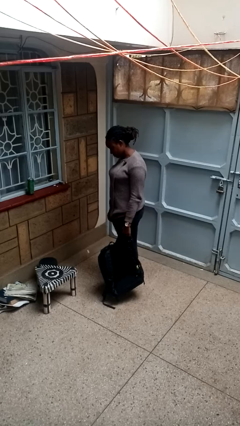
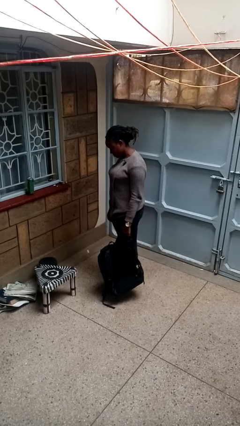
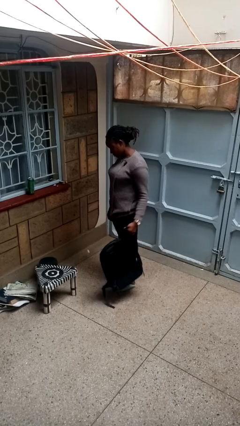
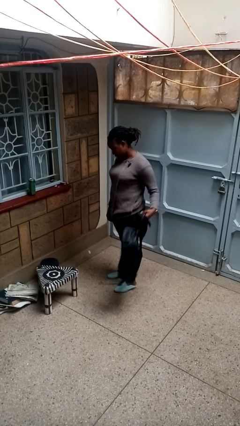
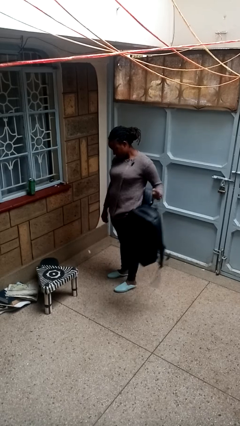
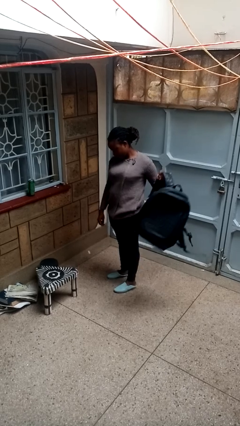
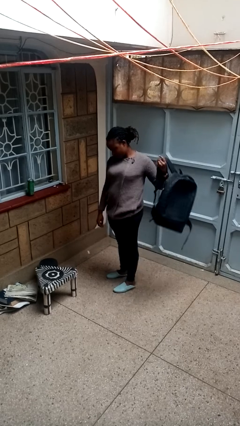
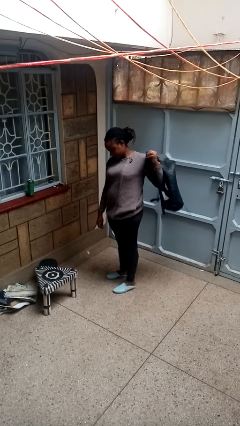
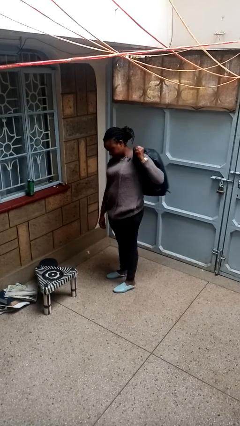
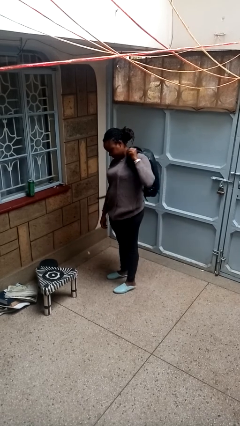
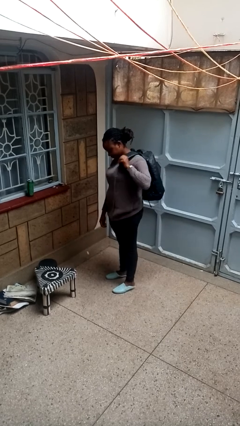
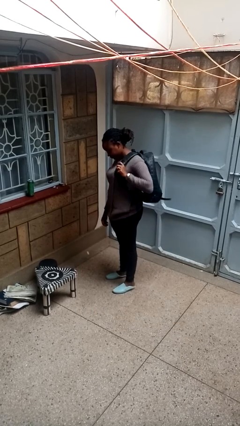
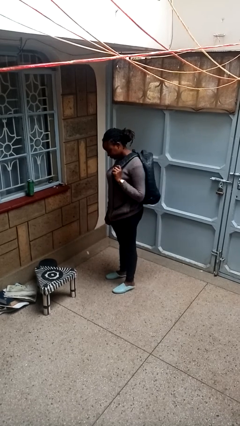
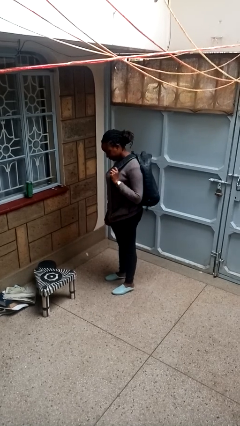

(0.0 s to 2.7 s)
person puts on backpack

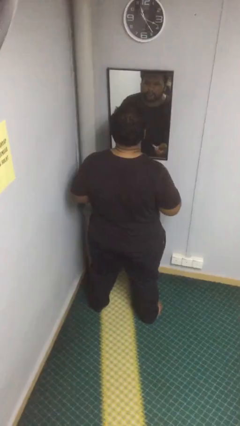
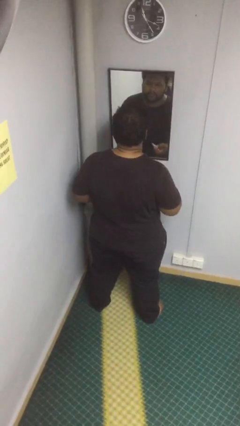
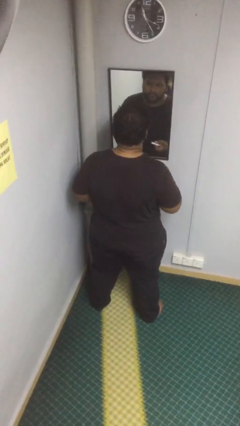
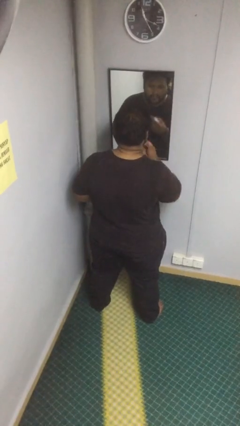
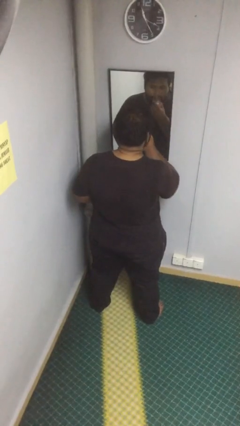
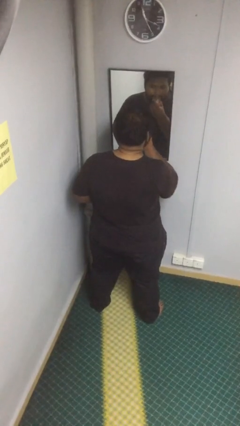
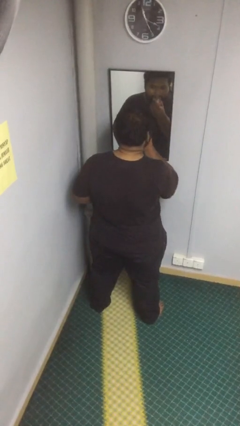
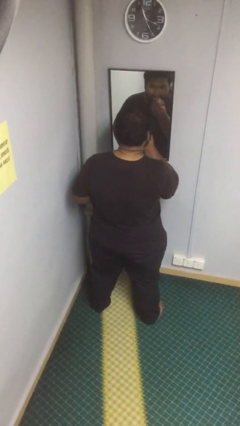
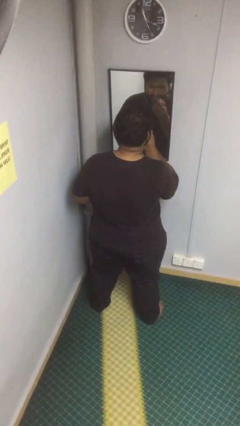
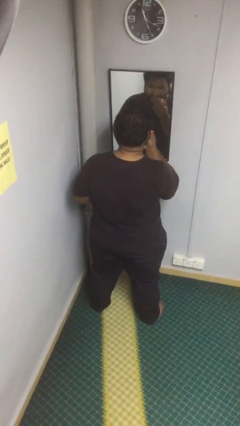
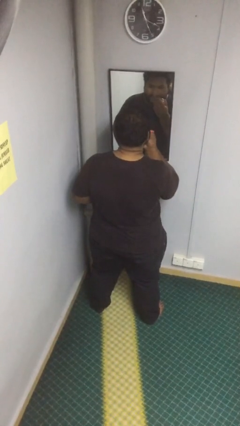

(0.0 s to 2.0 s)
person applies lip makeup

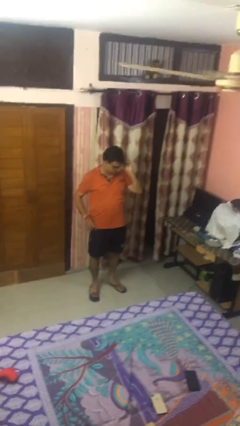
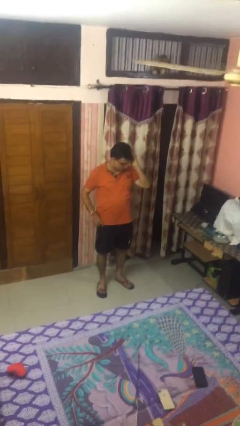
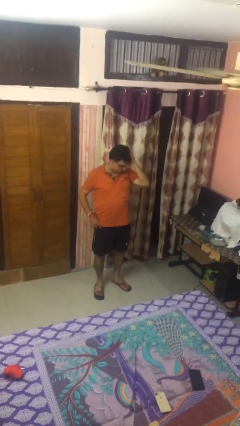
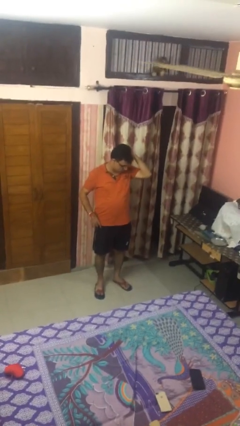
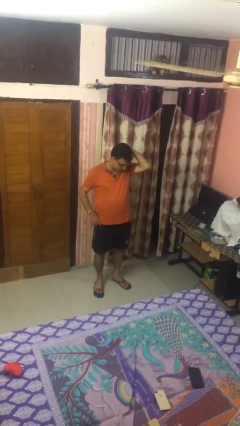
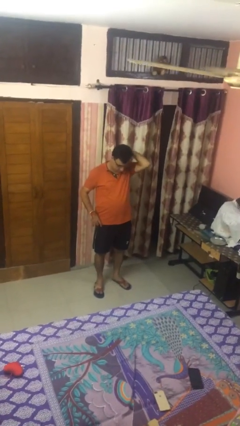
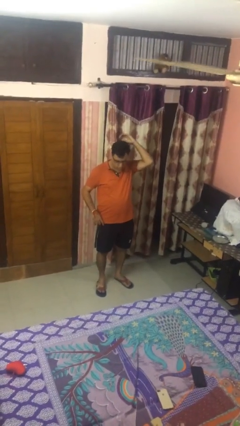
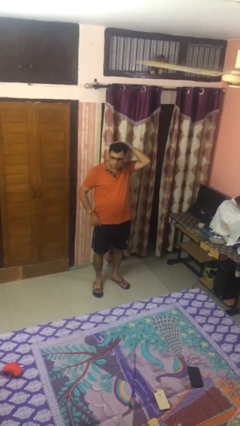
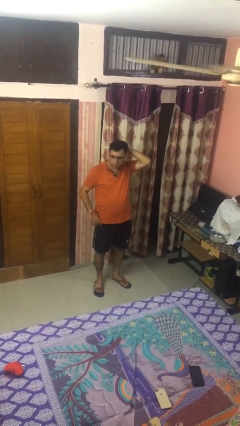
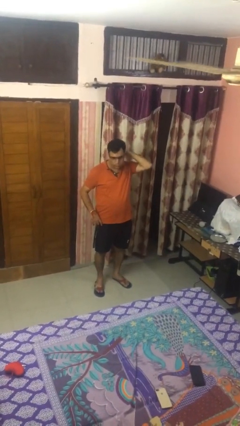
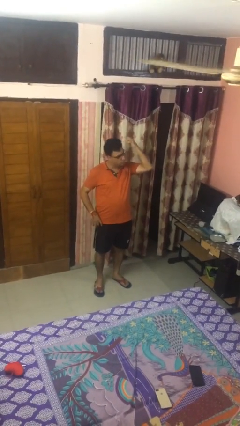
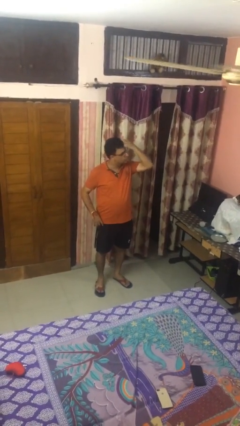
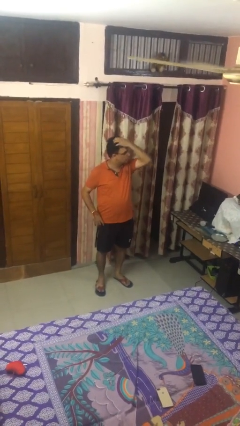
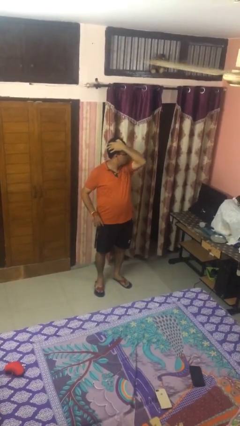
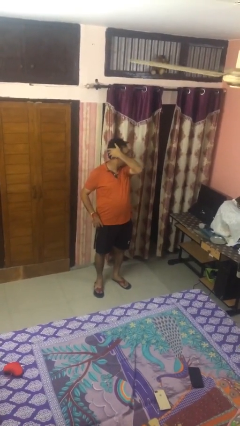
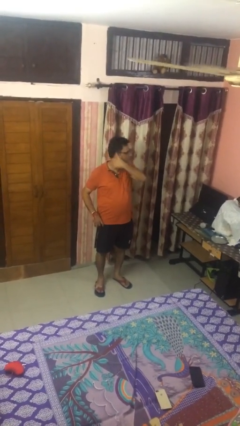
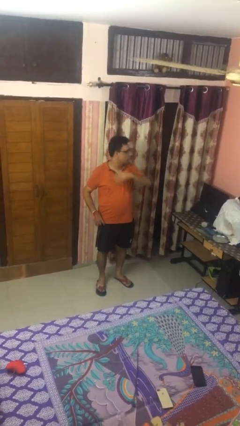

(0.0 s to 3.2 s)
person strokes hair

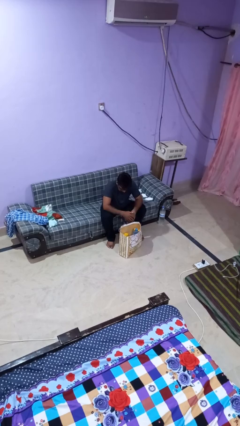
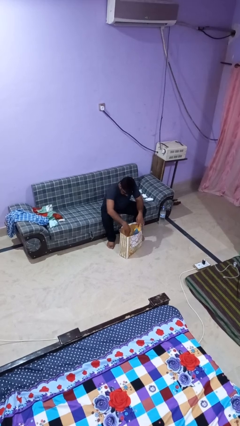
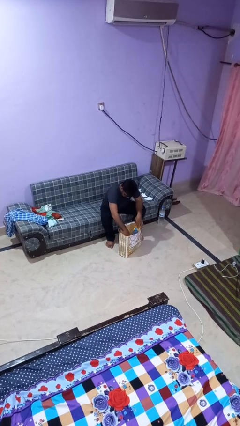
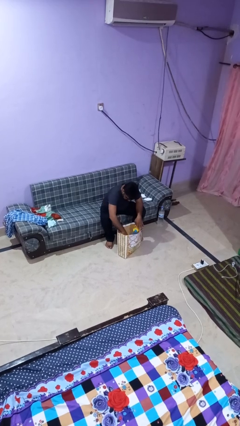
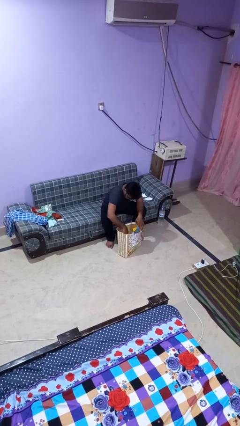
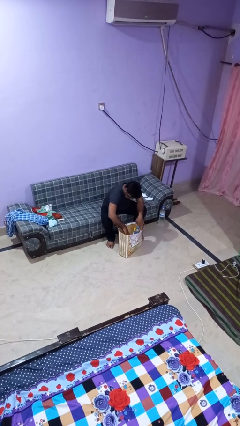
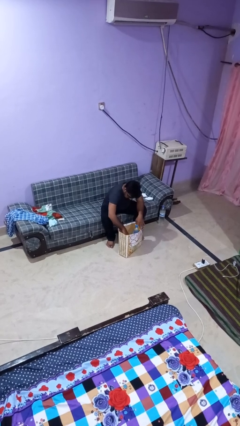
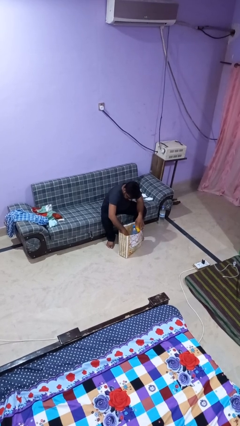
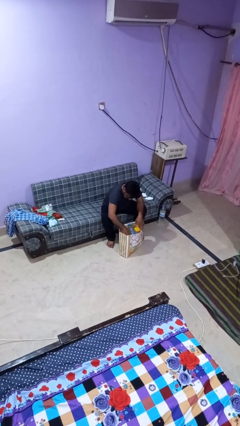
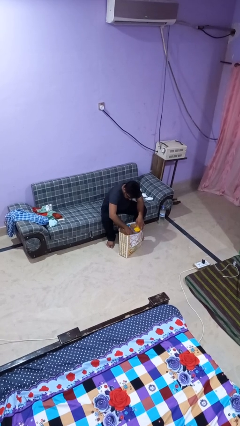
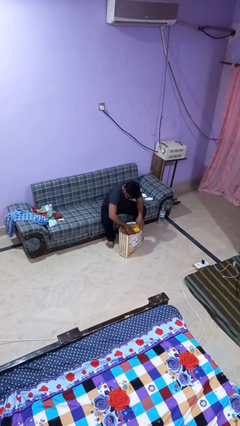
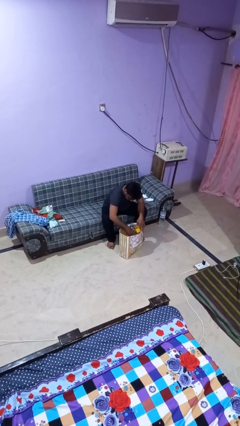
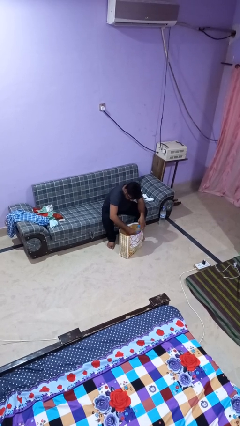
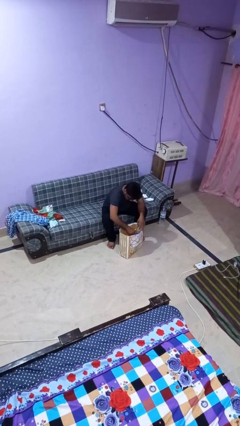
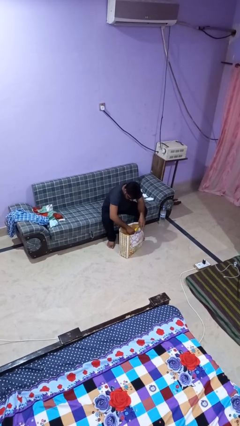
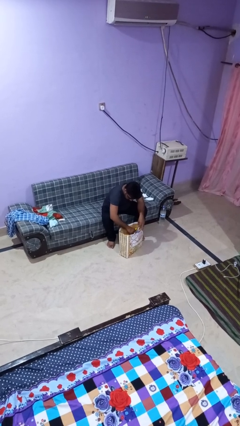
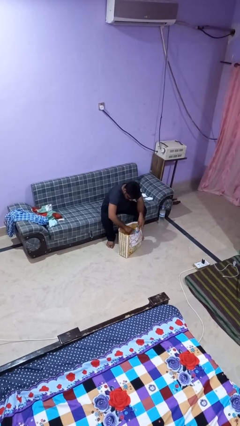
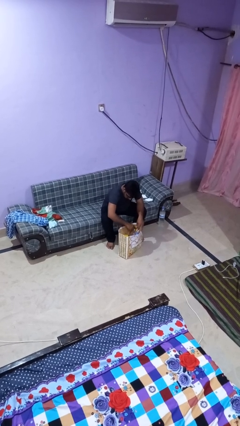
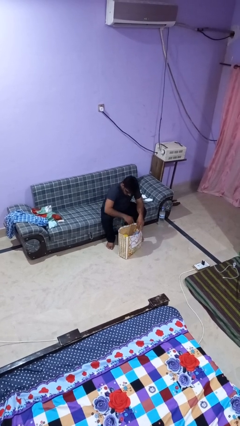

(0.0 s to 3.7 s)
person searches in bag

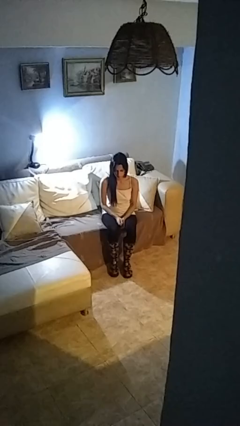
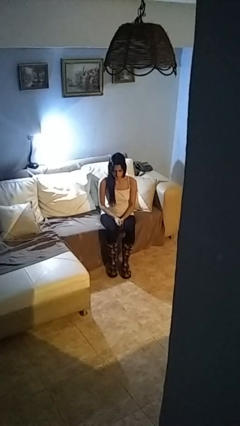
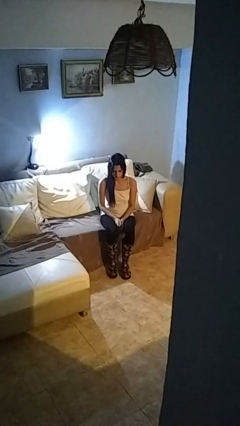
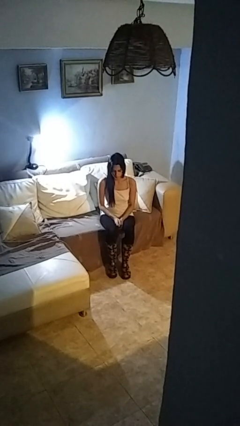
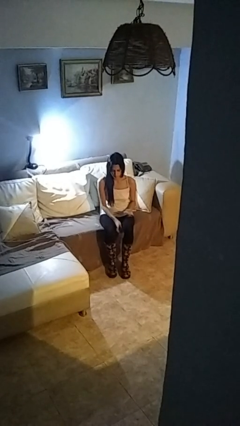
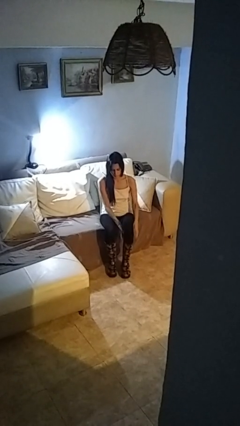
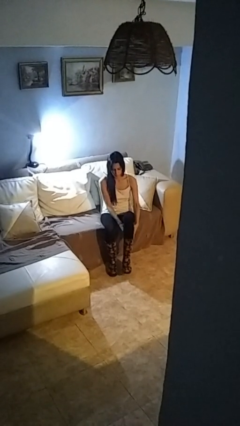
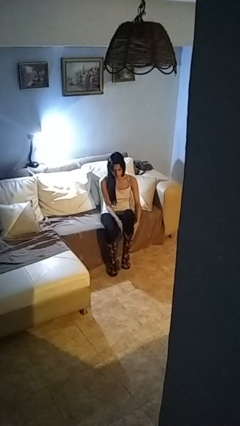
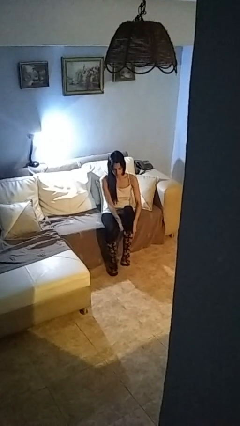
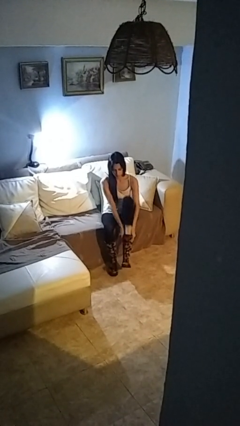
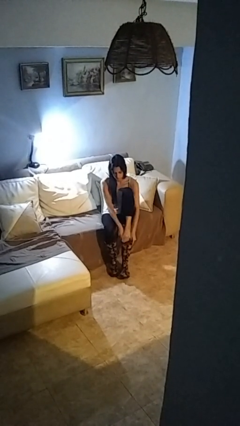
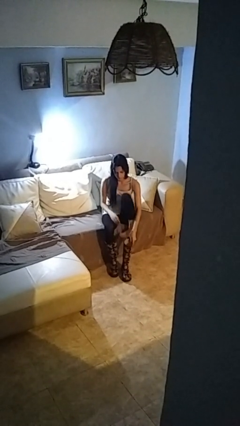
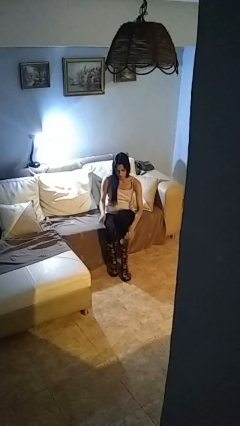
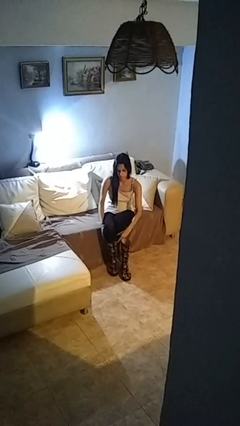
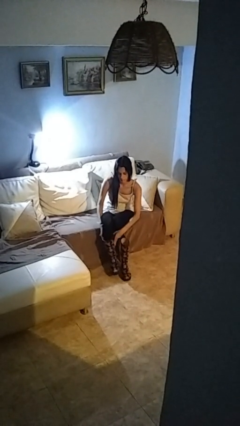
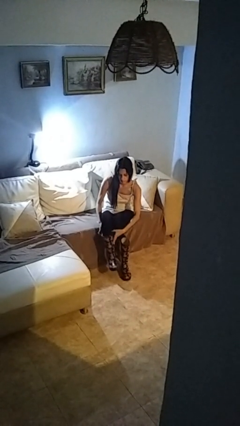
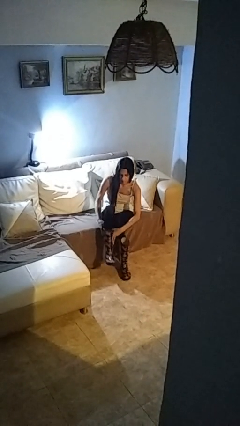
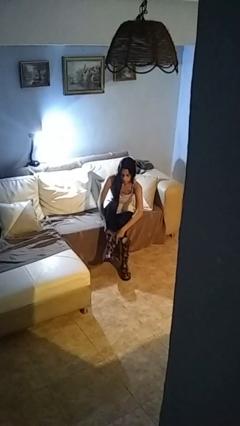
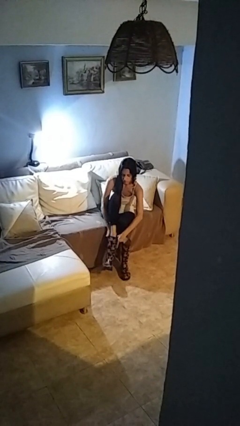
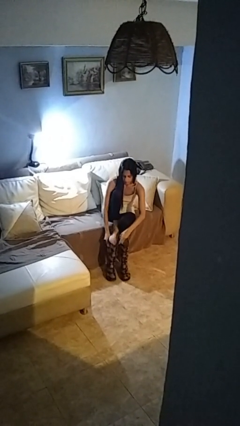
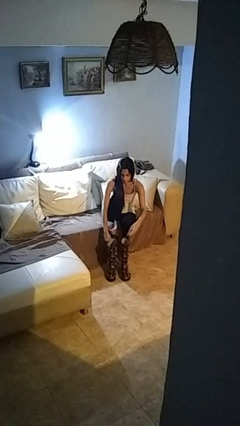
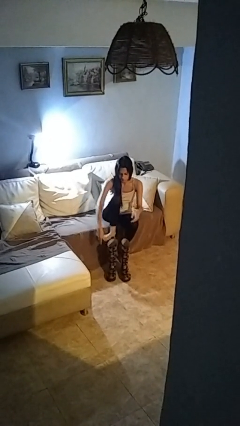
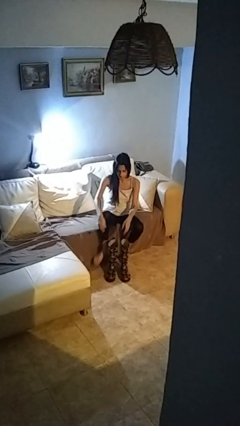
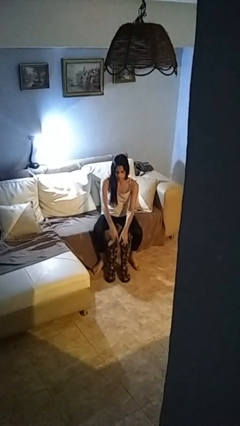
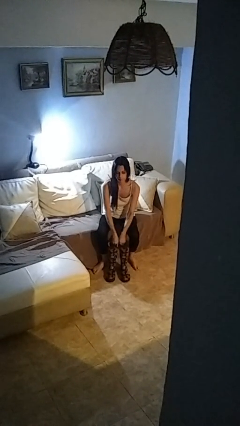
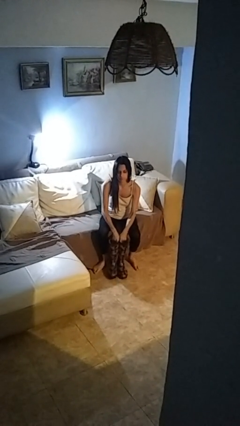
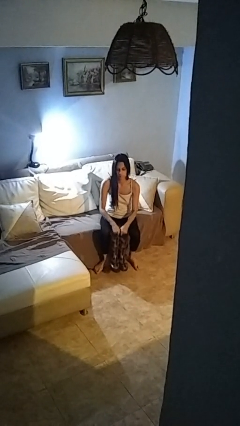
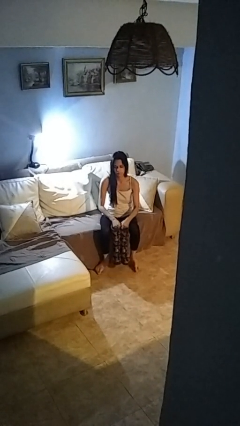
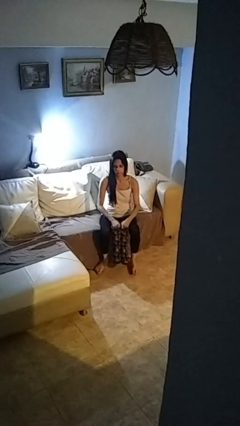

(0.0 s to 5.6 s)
person takes off boots

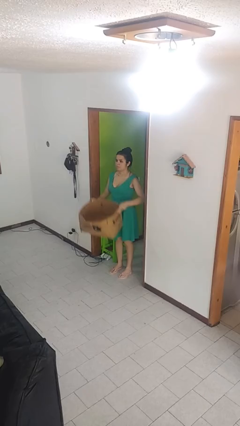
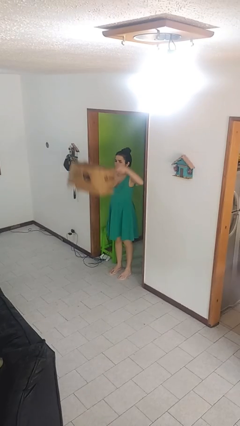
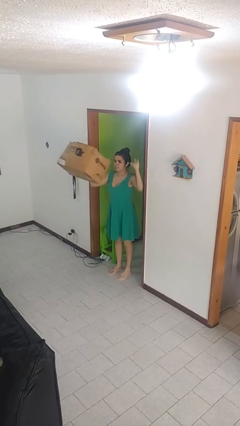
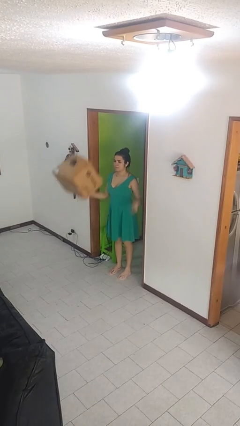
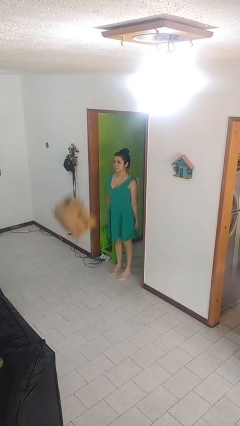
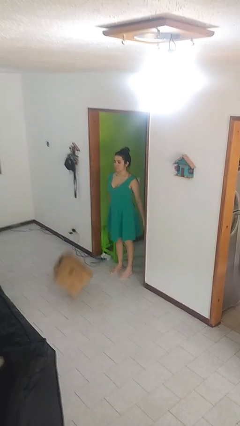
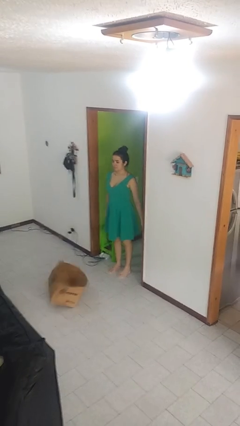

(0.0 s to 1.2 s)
person throws object into air
